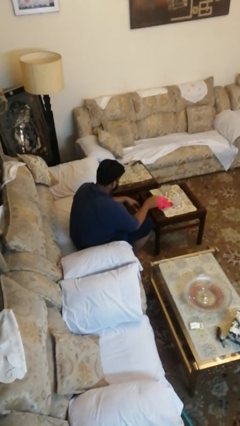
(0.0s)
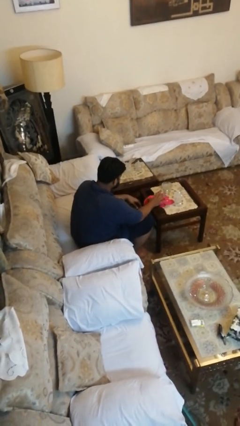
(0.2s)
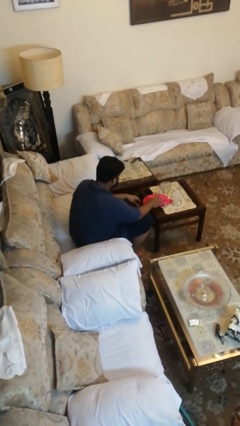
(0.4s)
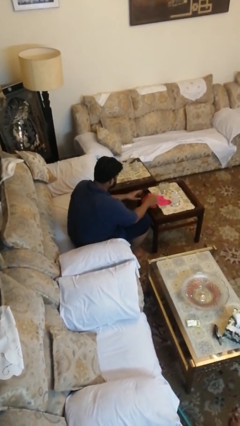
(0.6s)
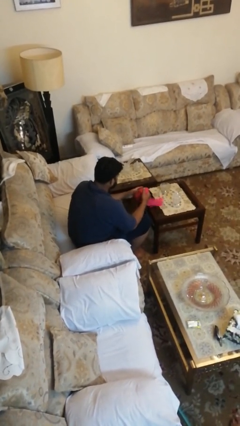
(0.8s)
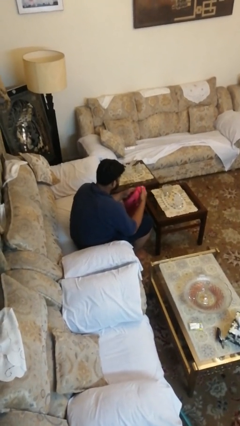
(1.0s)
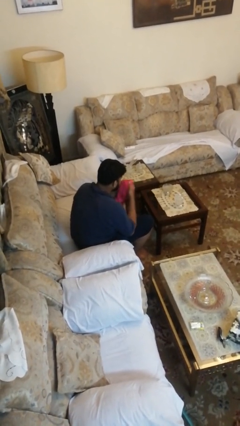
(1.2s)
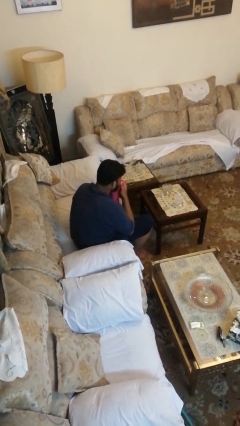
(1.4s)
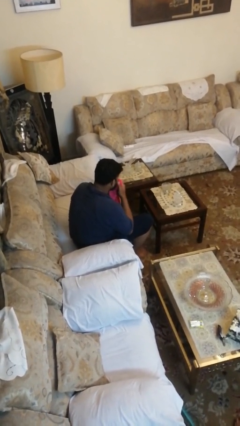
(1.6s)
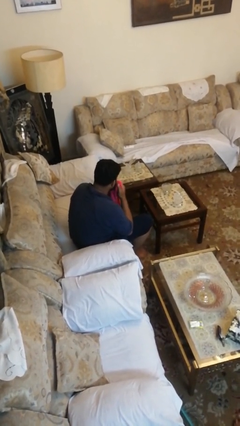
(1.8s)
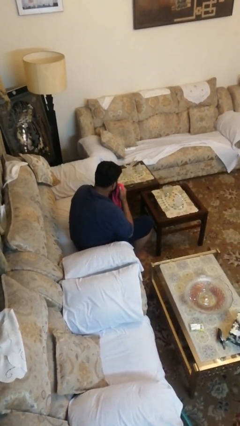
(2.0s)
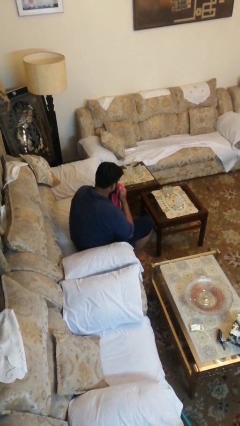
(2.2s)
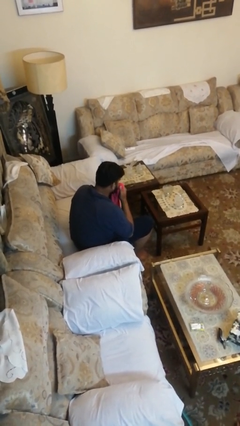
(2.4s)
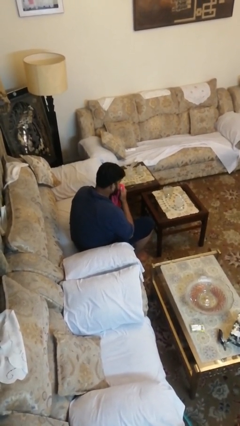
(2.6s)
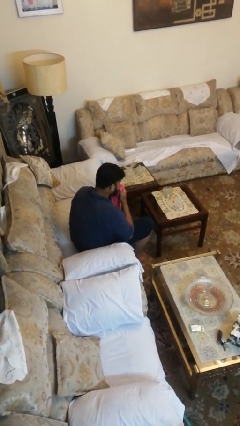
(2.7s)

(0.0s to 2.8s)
person wipes mouth with napkin

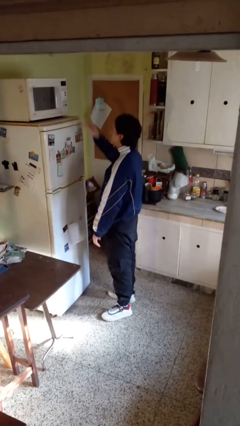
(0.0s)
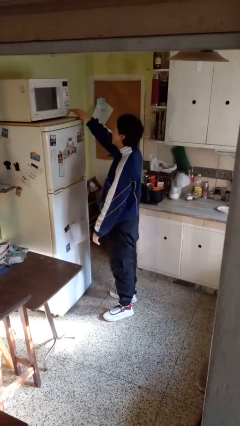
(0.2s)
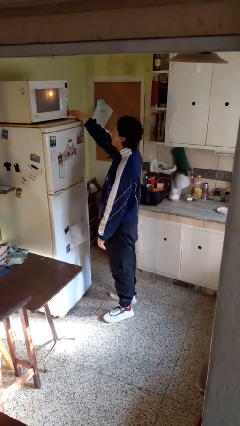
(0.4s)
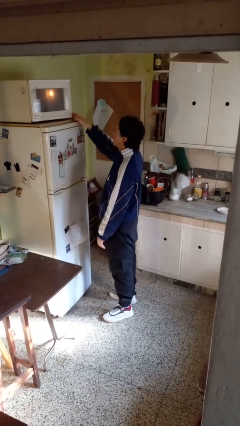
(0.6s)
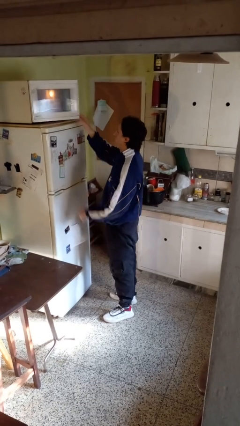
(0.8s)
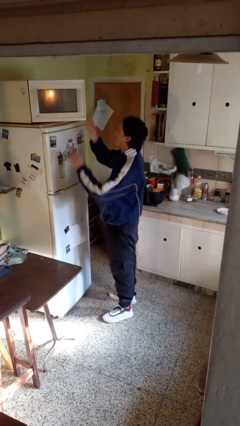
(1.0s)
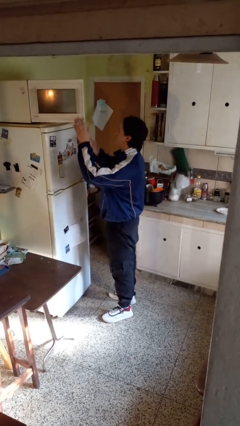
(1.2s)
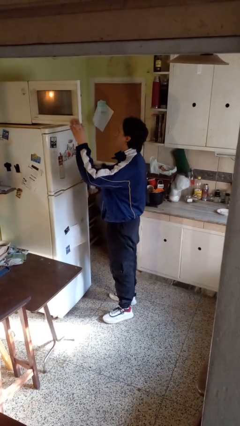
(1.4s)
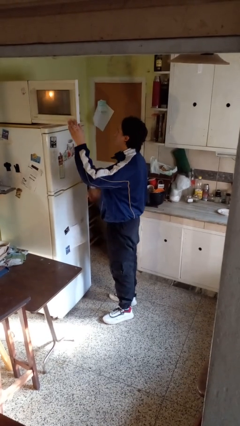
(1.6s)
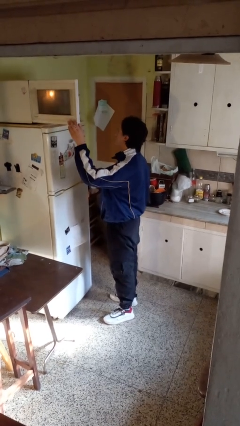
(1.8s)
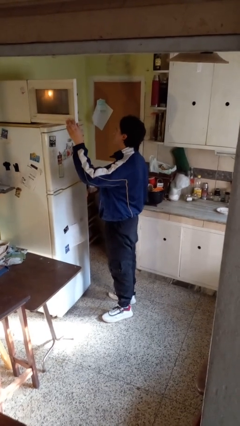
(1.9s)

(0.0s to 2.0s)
person opens microwave

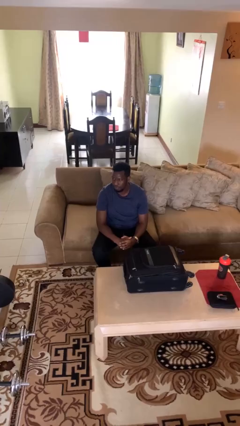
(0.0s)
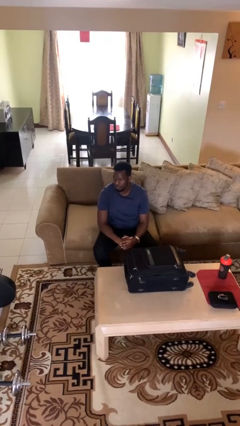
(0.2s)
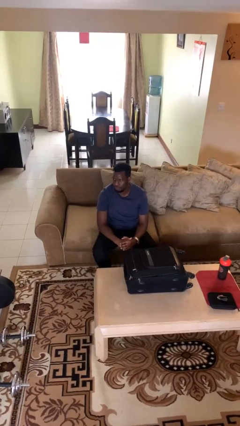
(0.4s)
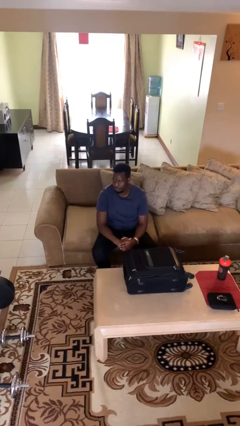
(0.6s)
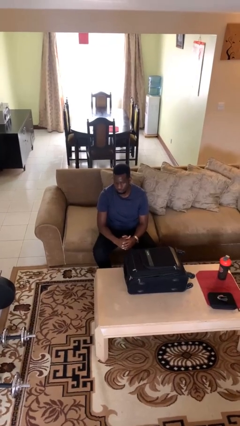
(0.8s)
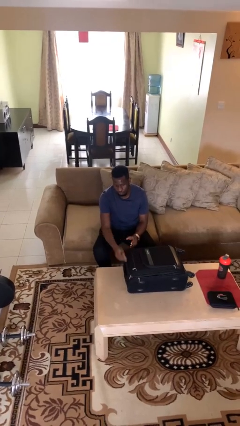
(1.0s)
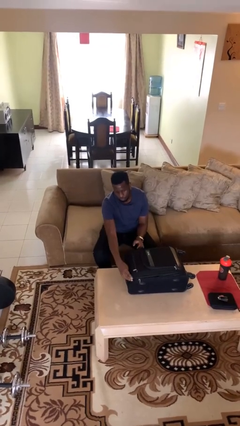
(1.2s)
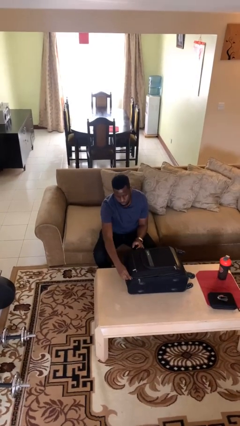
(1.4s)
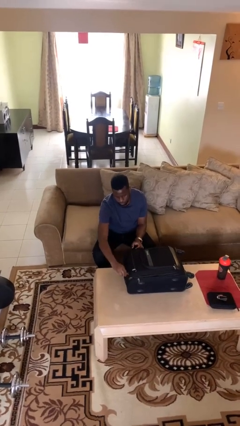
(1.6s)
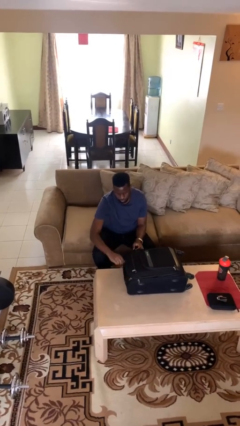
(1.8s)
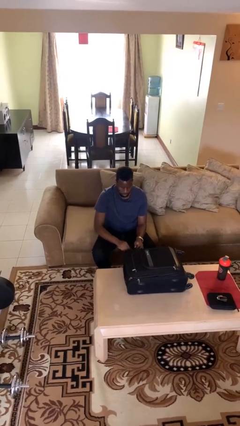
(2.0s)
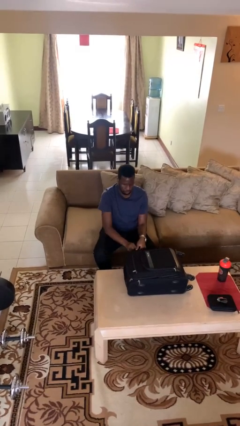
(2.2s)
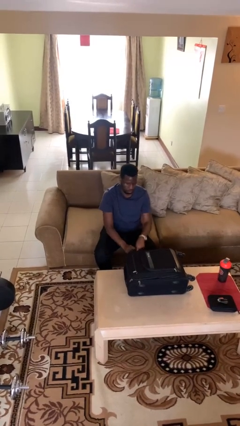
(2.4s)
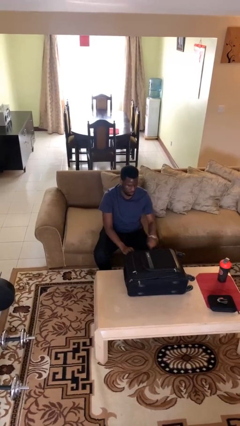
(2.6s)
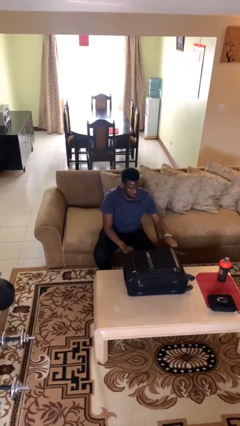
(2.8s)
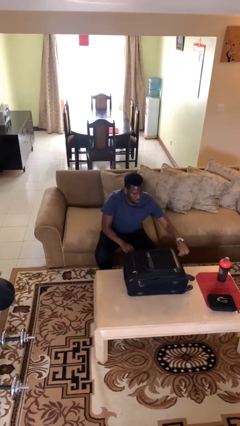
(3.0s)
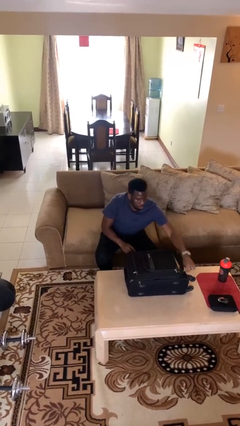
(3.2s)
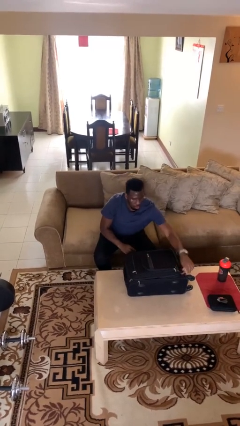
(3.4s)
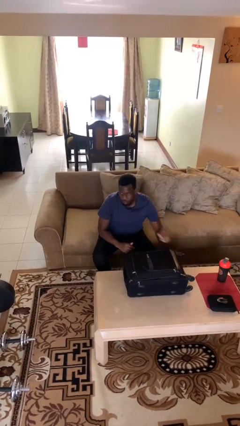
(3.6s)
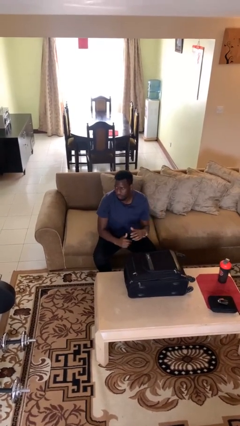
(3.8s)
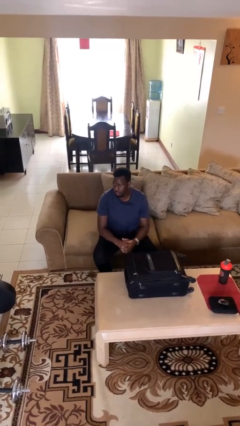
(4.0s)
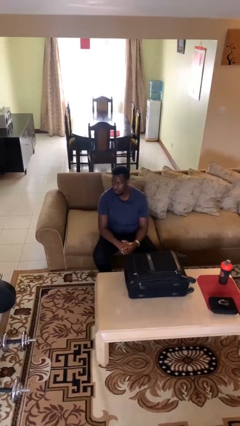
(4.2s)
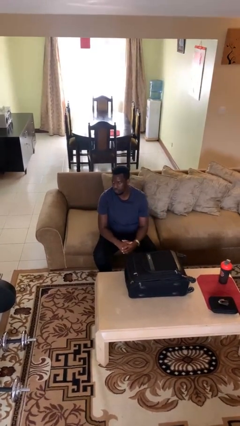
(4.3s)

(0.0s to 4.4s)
person opens suitcase

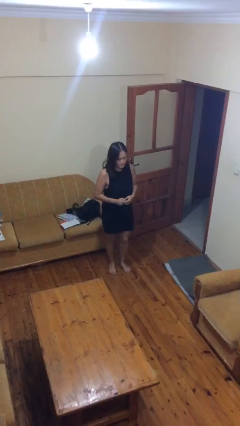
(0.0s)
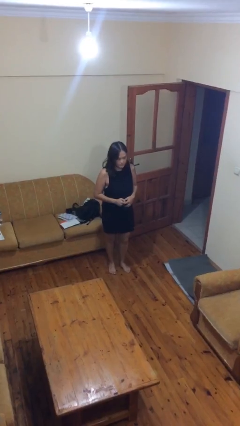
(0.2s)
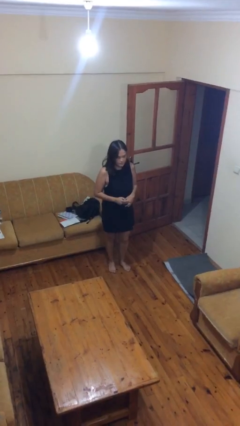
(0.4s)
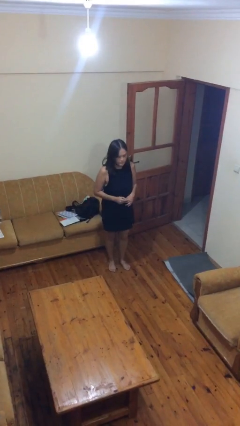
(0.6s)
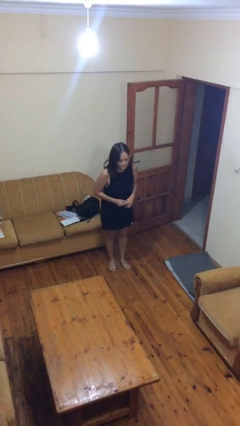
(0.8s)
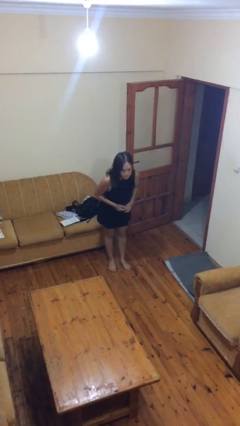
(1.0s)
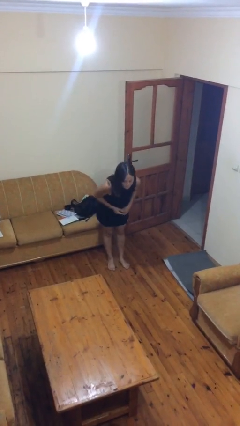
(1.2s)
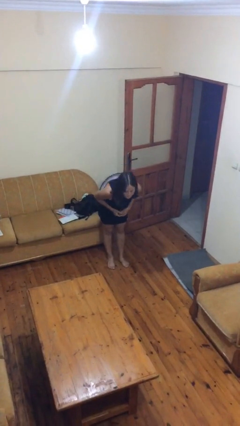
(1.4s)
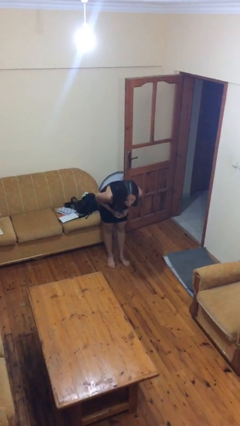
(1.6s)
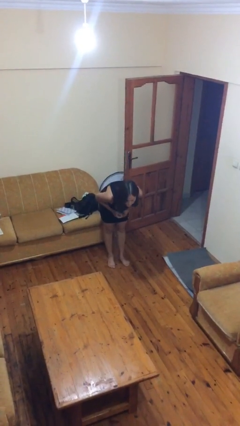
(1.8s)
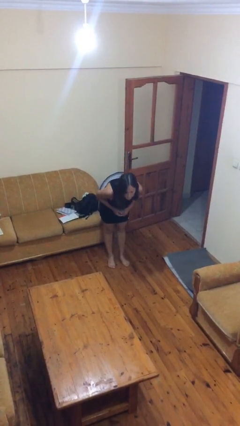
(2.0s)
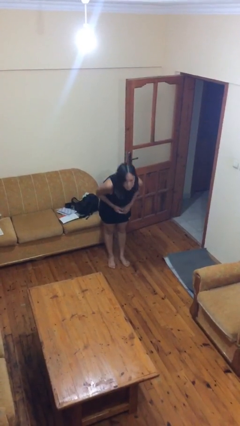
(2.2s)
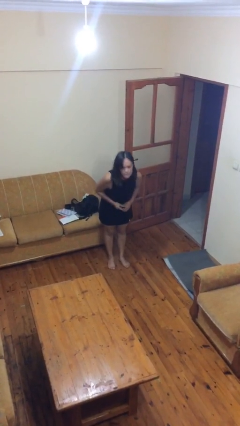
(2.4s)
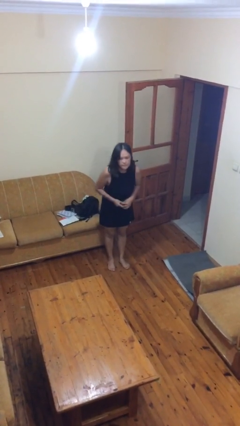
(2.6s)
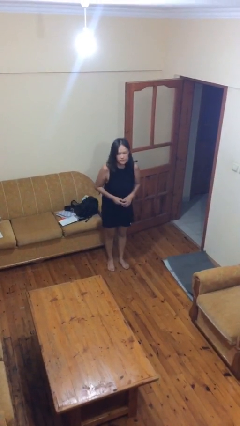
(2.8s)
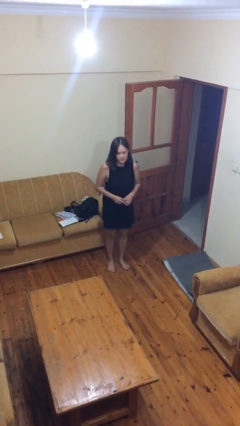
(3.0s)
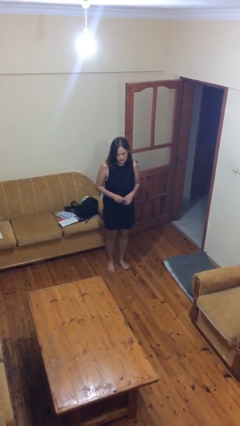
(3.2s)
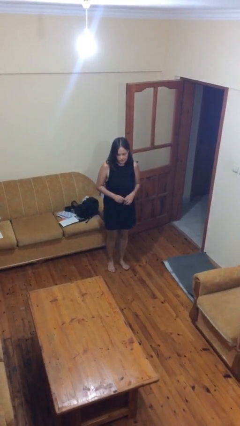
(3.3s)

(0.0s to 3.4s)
person bows

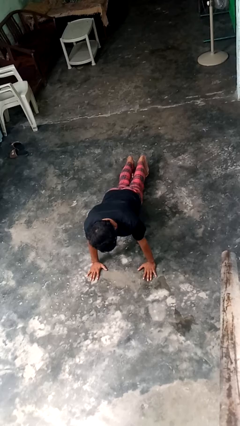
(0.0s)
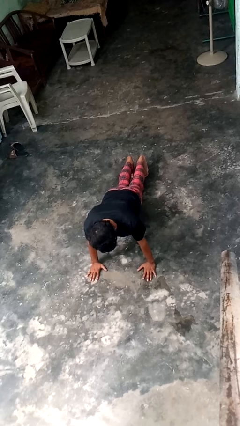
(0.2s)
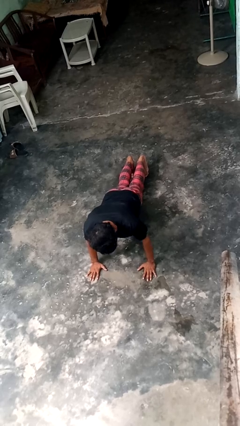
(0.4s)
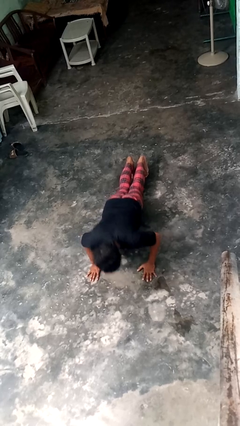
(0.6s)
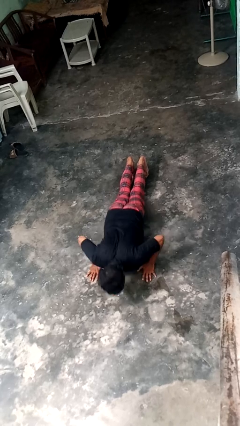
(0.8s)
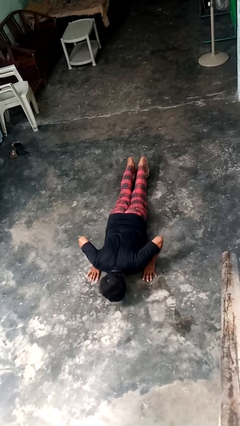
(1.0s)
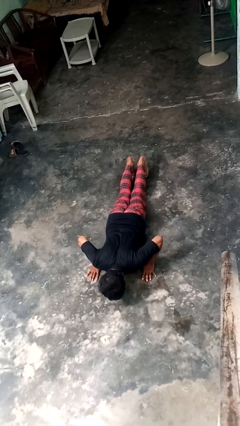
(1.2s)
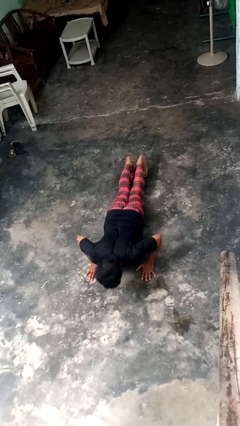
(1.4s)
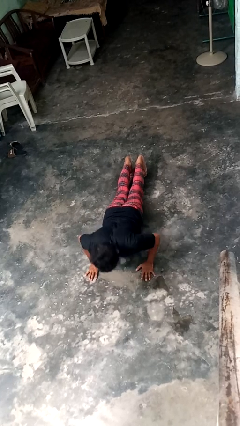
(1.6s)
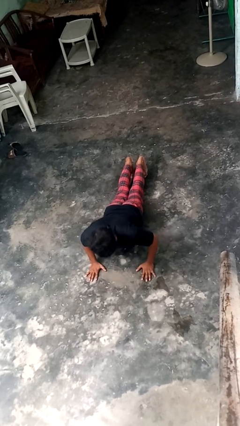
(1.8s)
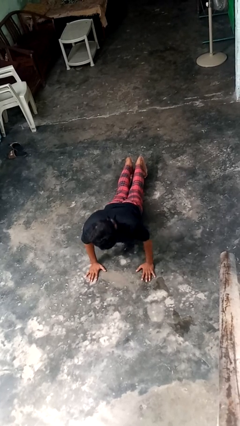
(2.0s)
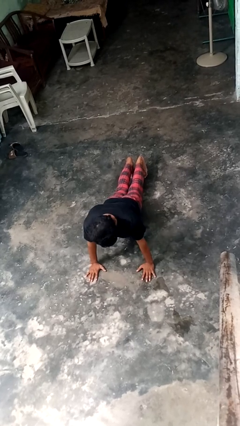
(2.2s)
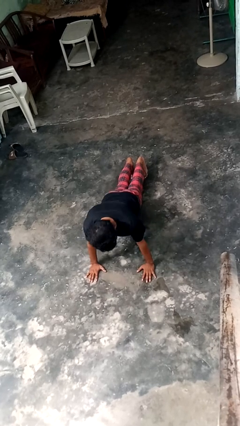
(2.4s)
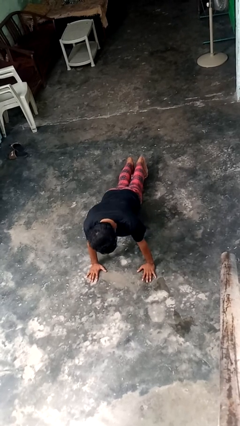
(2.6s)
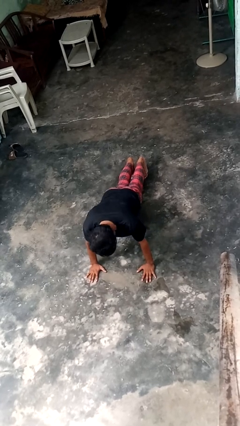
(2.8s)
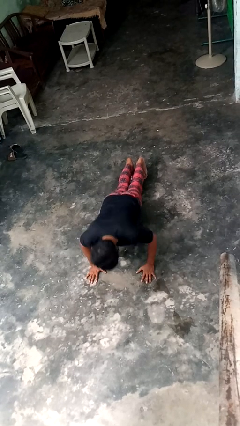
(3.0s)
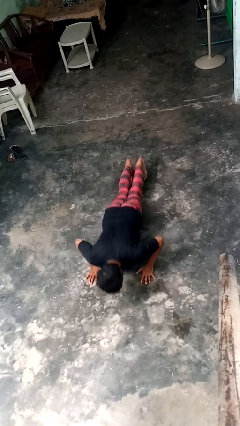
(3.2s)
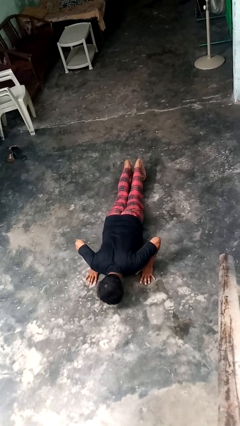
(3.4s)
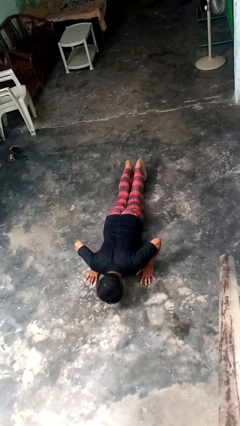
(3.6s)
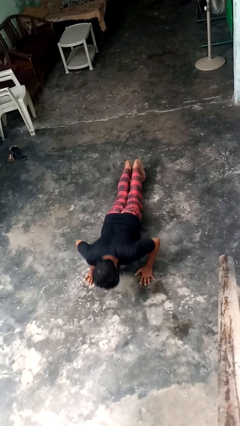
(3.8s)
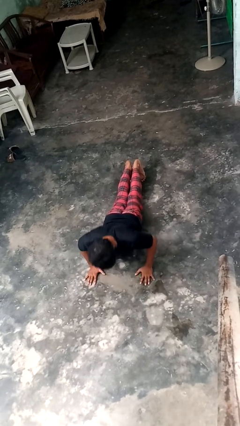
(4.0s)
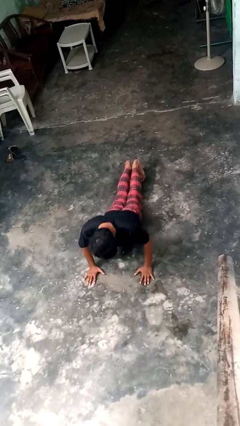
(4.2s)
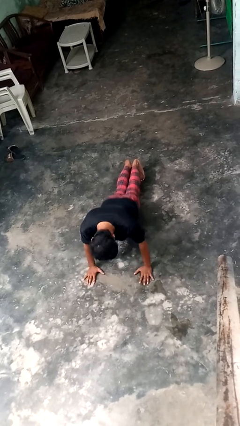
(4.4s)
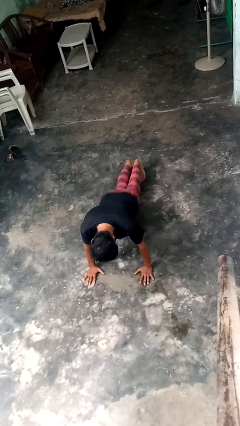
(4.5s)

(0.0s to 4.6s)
person exercises with pushup

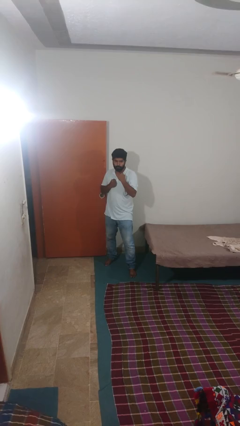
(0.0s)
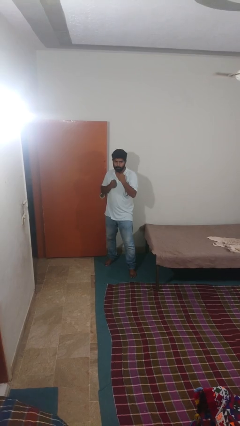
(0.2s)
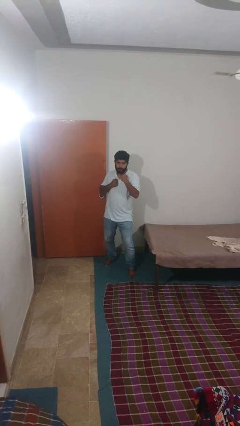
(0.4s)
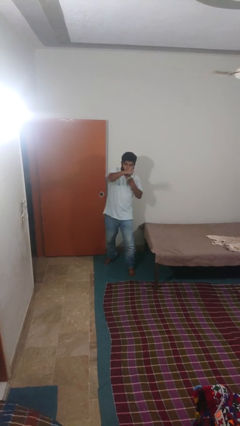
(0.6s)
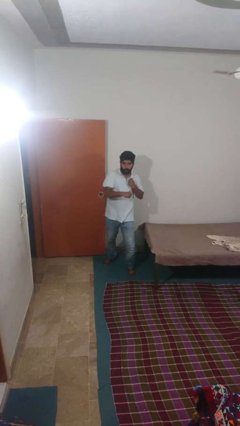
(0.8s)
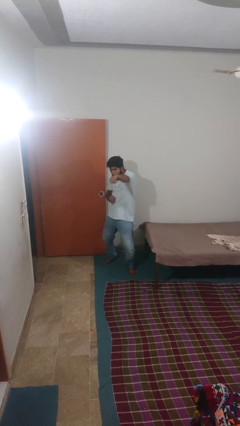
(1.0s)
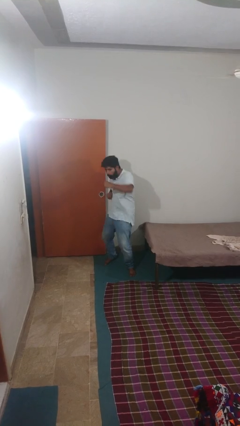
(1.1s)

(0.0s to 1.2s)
person punches
